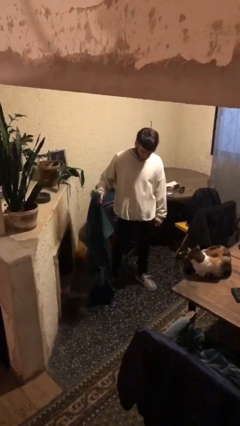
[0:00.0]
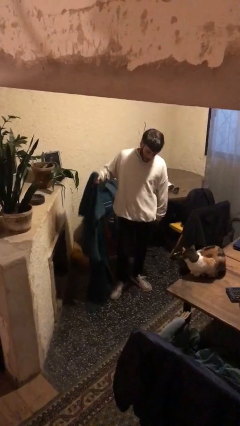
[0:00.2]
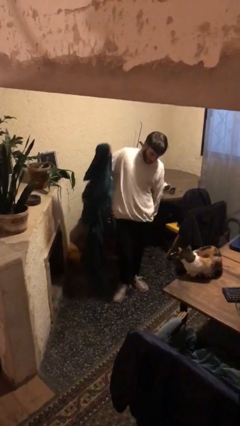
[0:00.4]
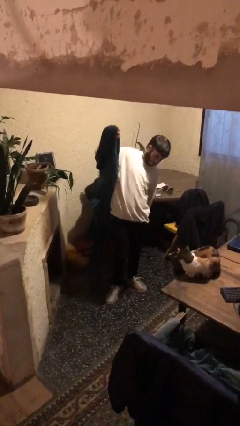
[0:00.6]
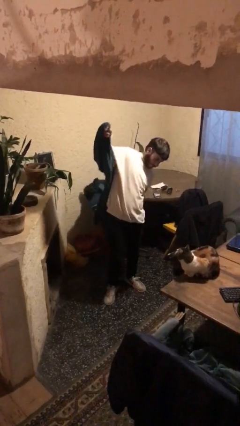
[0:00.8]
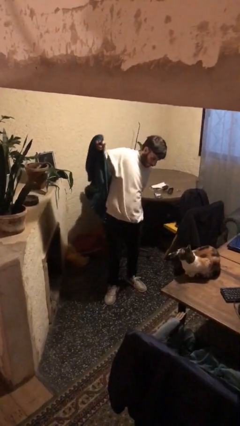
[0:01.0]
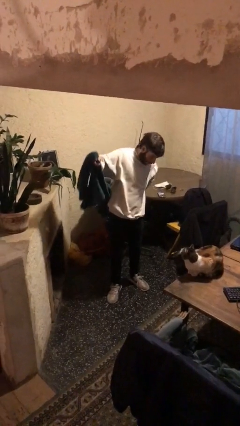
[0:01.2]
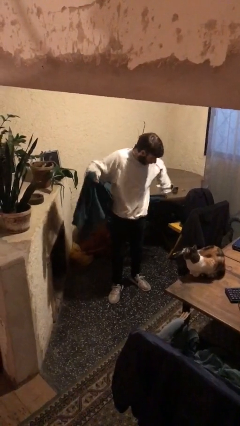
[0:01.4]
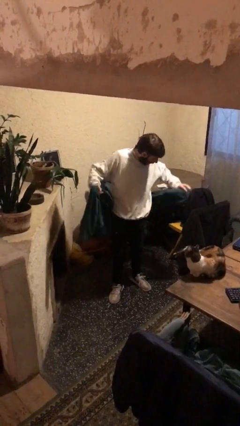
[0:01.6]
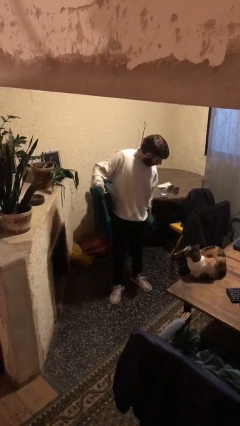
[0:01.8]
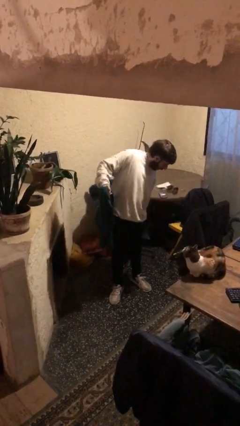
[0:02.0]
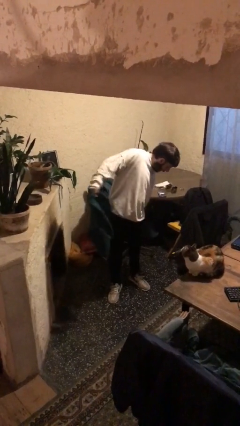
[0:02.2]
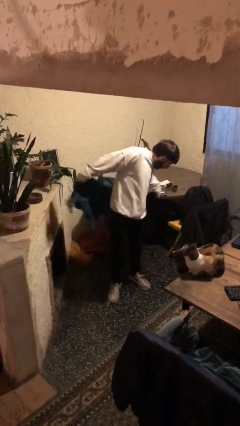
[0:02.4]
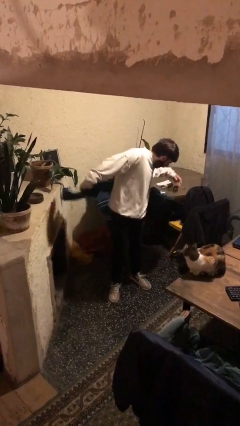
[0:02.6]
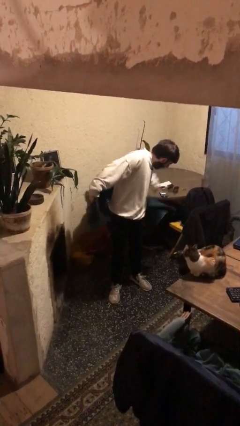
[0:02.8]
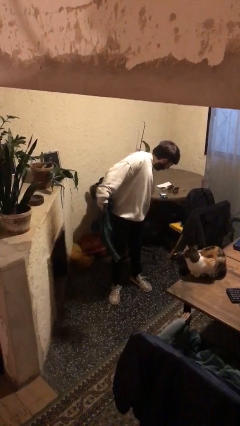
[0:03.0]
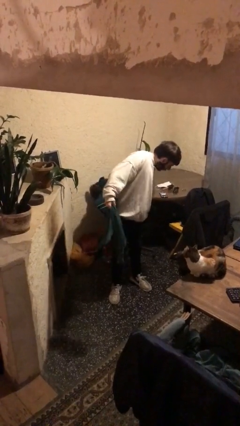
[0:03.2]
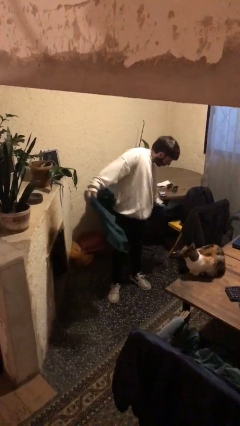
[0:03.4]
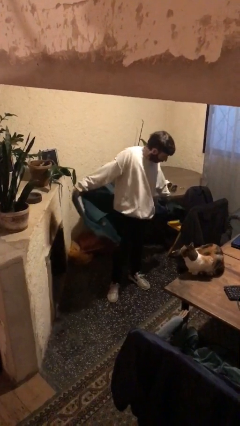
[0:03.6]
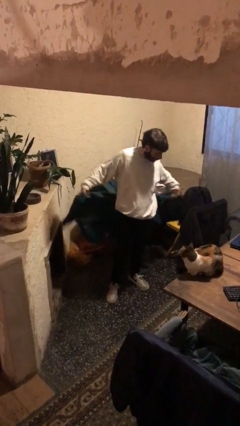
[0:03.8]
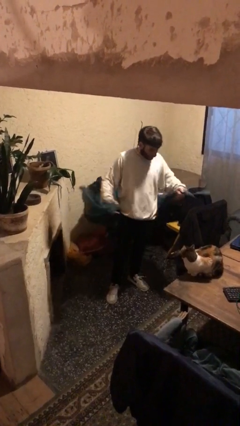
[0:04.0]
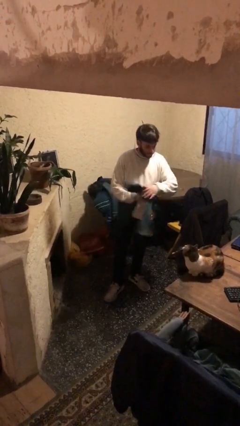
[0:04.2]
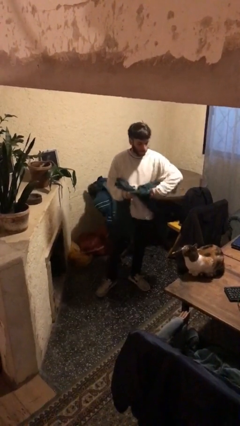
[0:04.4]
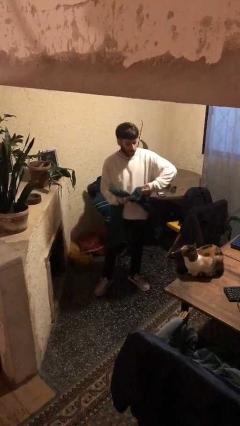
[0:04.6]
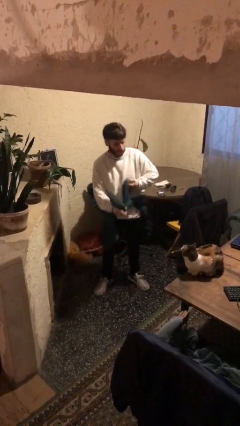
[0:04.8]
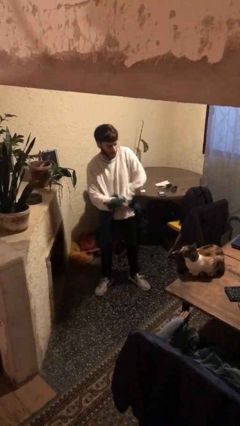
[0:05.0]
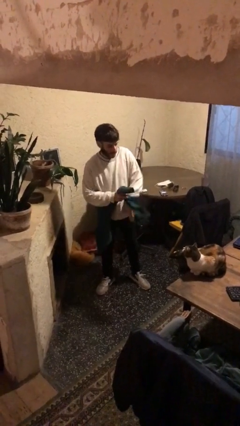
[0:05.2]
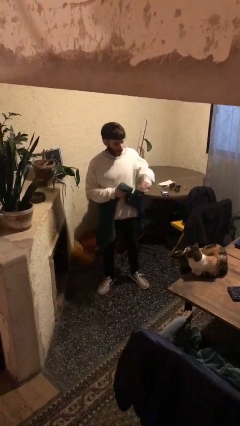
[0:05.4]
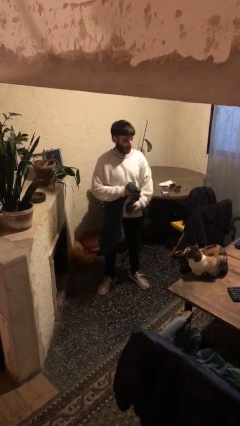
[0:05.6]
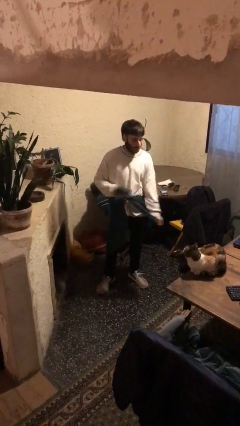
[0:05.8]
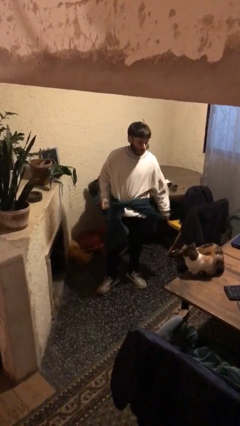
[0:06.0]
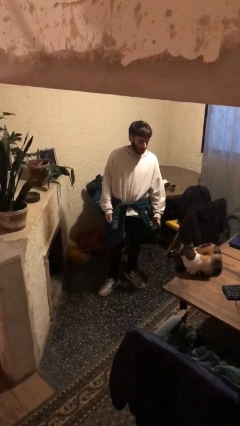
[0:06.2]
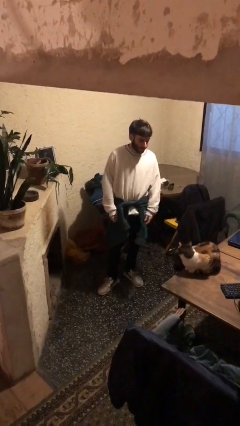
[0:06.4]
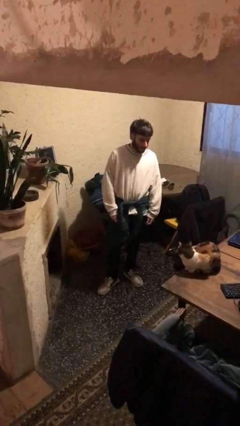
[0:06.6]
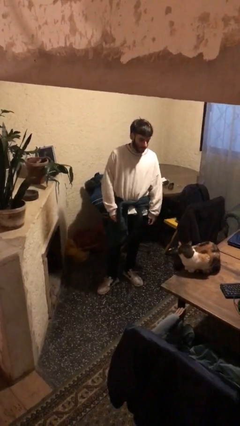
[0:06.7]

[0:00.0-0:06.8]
person ties jacket around waist

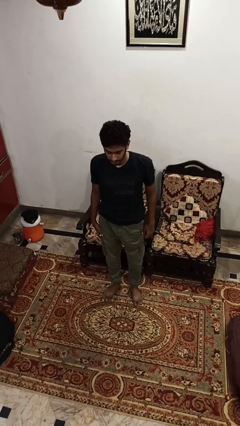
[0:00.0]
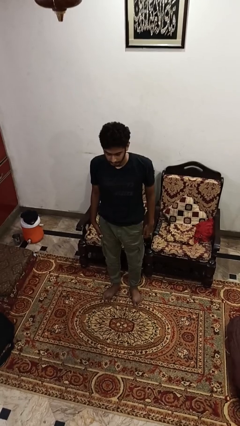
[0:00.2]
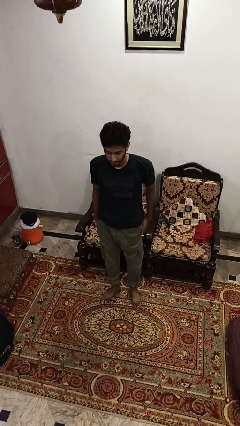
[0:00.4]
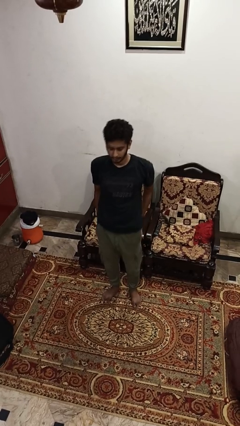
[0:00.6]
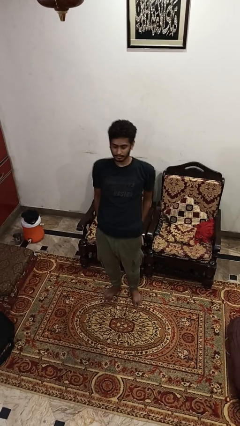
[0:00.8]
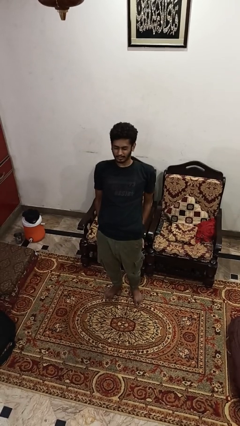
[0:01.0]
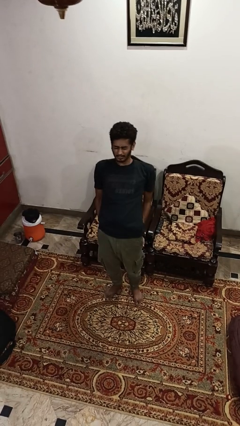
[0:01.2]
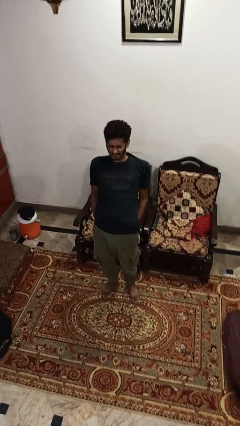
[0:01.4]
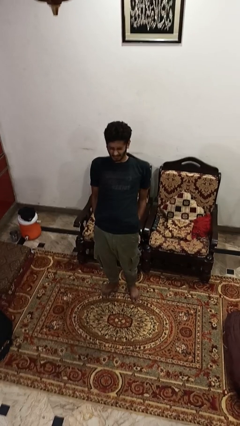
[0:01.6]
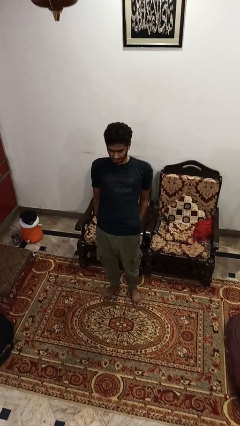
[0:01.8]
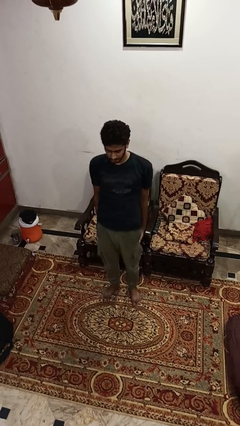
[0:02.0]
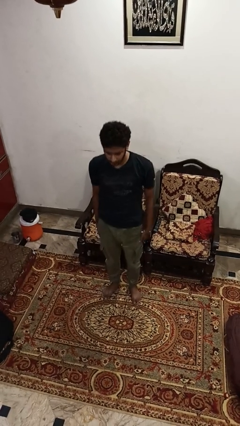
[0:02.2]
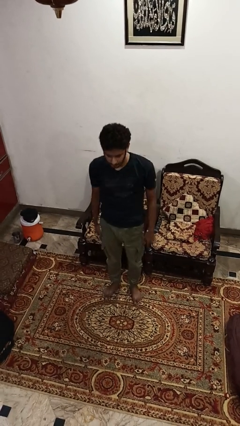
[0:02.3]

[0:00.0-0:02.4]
person stretches back

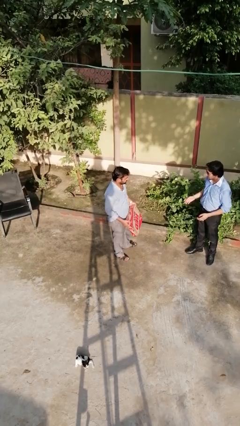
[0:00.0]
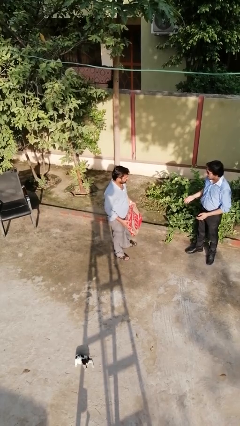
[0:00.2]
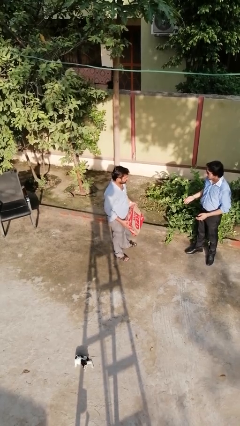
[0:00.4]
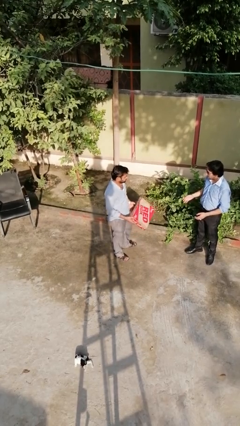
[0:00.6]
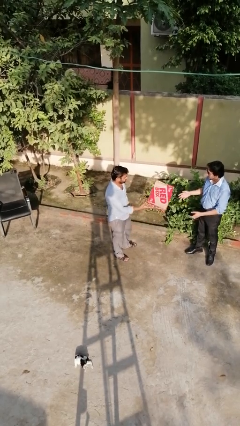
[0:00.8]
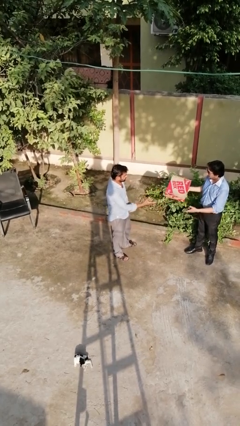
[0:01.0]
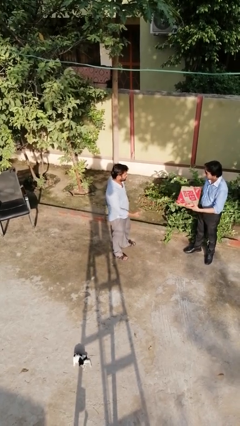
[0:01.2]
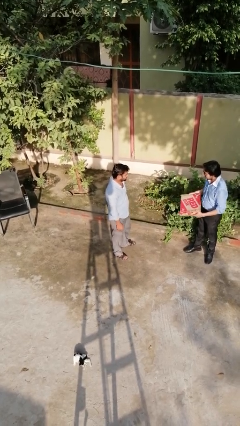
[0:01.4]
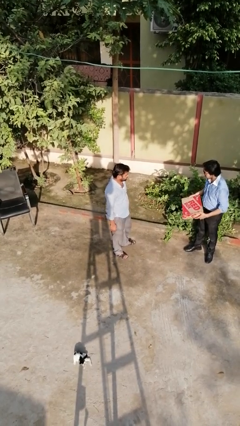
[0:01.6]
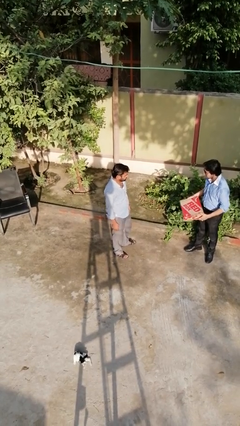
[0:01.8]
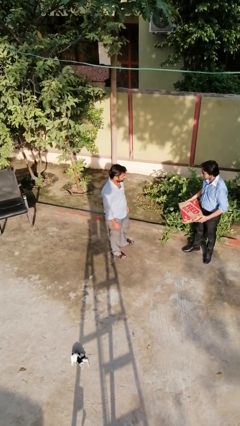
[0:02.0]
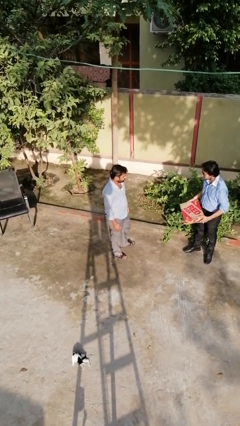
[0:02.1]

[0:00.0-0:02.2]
person throws object to person

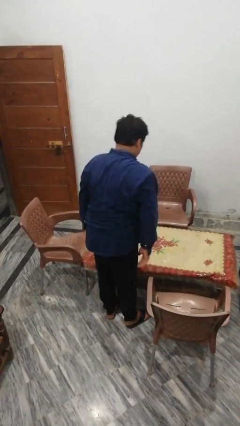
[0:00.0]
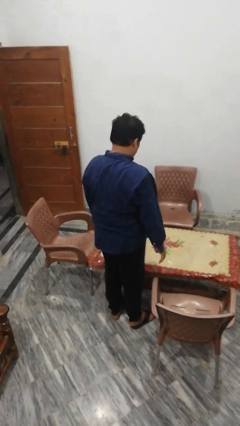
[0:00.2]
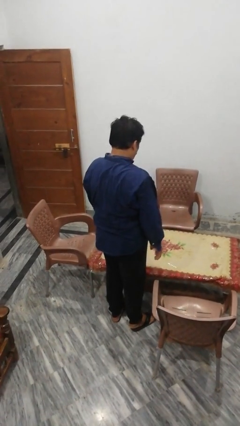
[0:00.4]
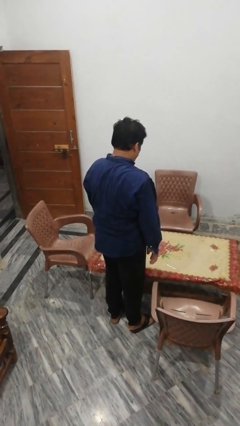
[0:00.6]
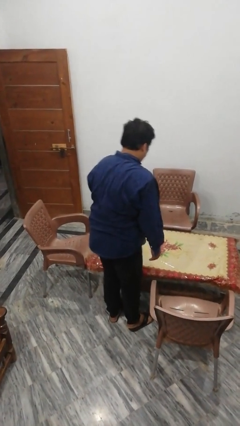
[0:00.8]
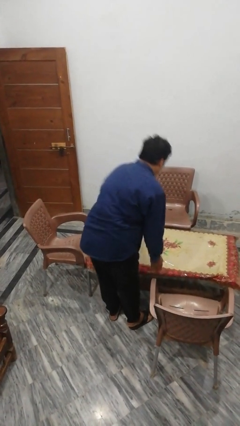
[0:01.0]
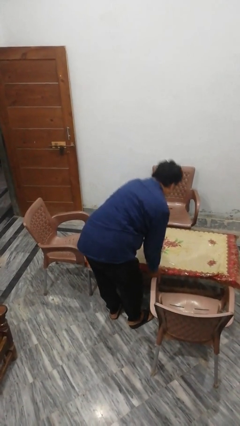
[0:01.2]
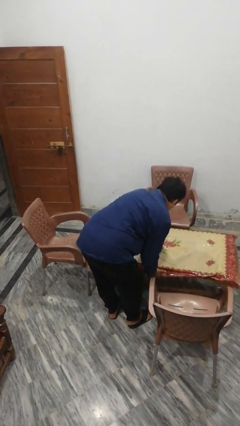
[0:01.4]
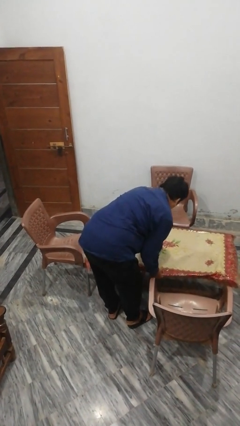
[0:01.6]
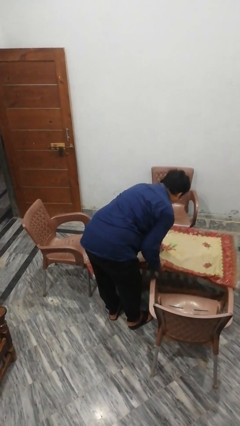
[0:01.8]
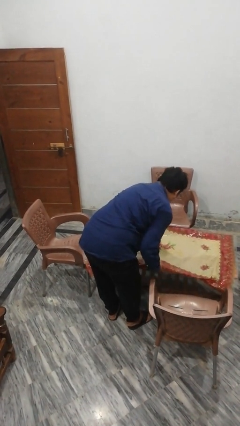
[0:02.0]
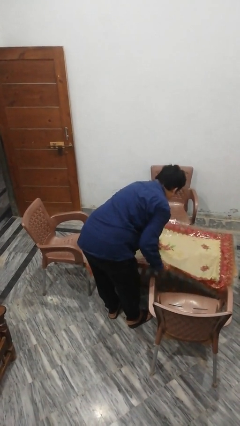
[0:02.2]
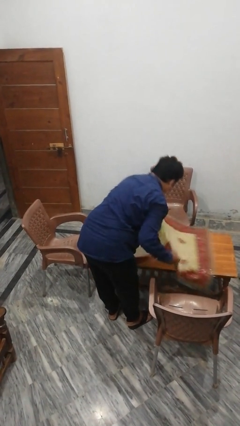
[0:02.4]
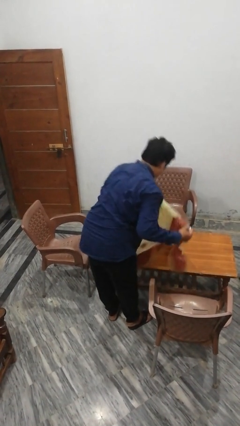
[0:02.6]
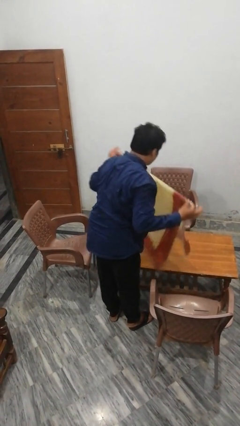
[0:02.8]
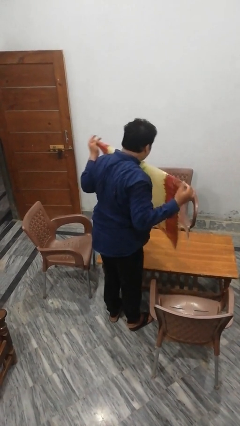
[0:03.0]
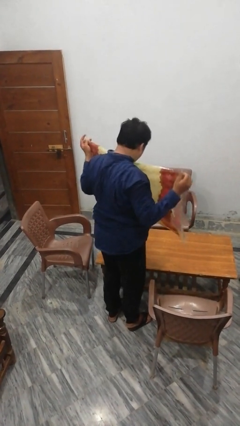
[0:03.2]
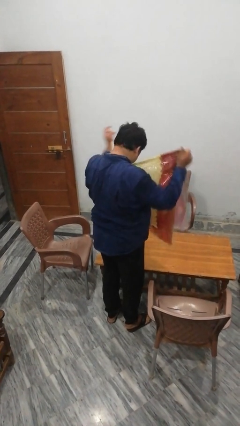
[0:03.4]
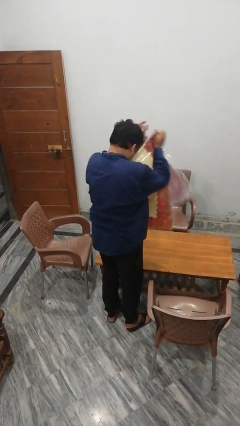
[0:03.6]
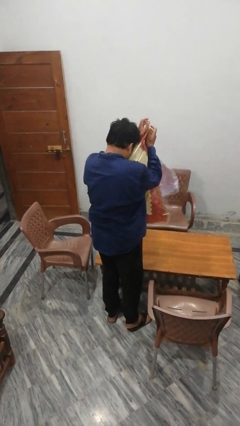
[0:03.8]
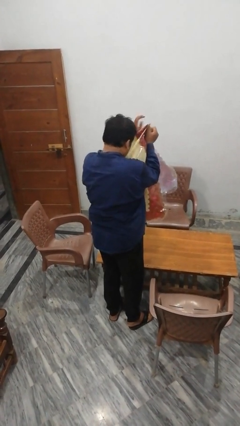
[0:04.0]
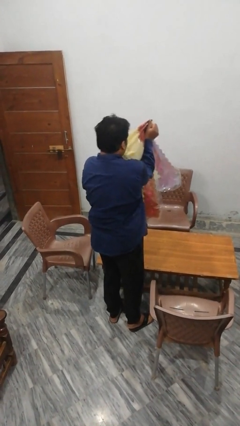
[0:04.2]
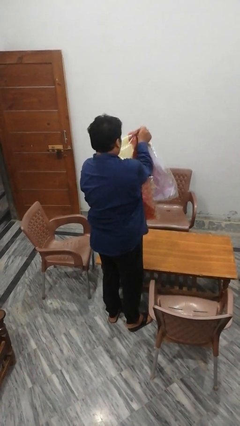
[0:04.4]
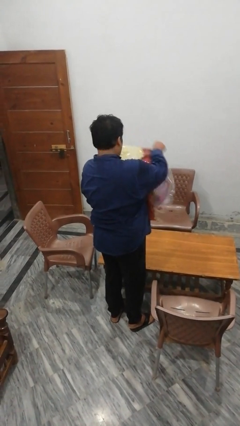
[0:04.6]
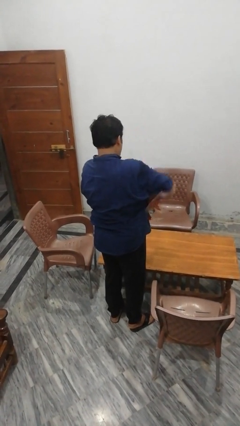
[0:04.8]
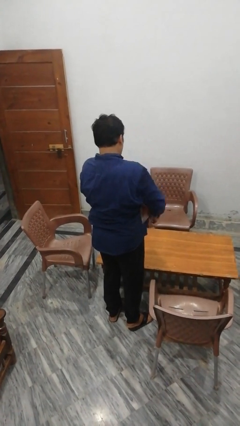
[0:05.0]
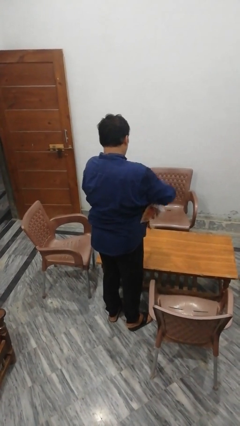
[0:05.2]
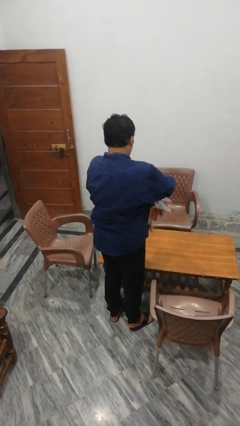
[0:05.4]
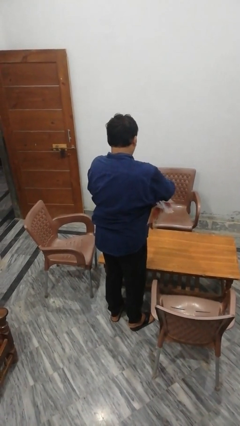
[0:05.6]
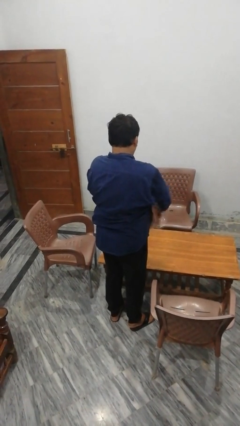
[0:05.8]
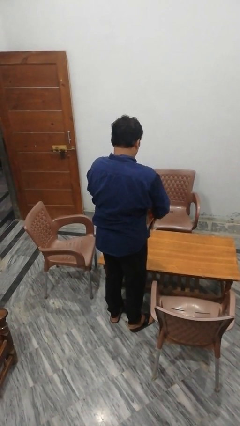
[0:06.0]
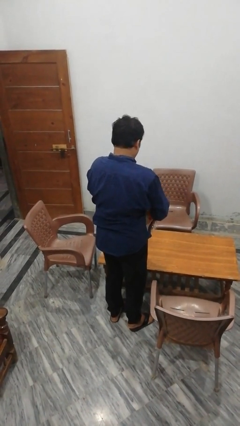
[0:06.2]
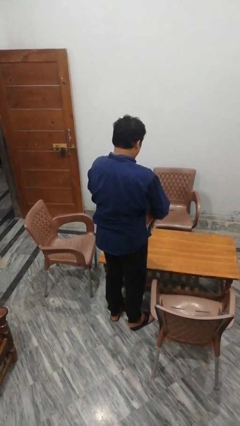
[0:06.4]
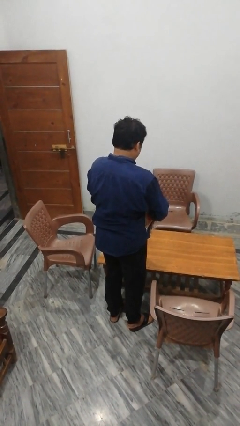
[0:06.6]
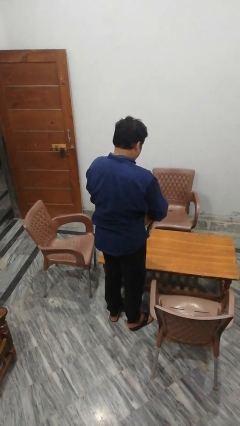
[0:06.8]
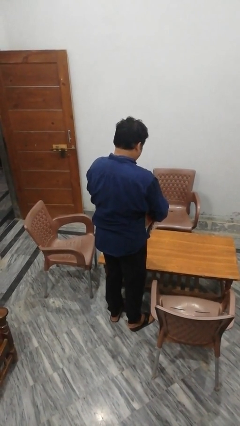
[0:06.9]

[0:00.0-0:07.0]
person folds tablecloth
